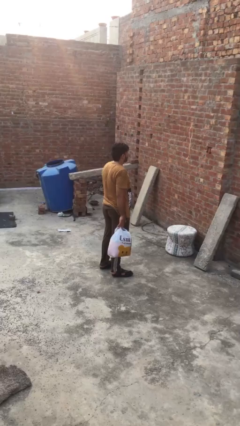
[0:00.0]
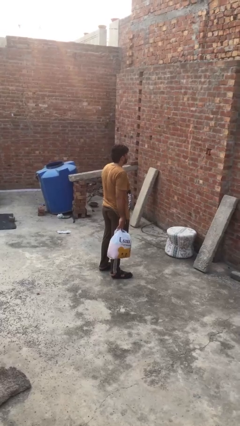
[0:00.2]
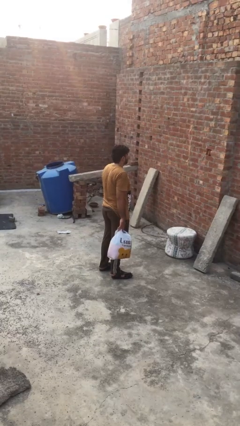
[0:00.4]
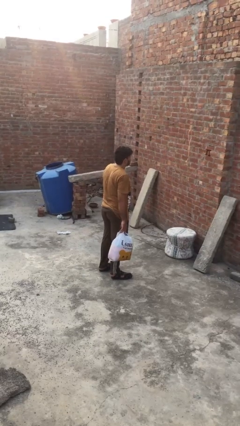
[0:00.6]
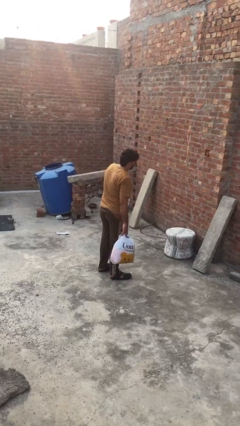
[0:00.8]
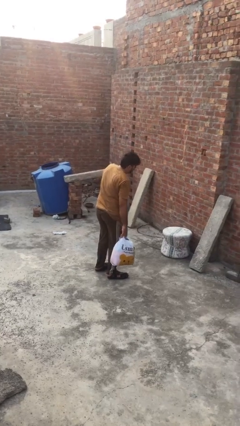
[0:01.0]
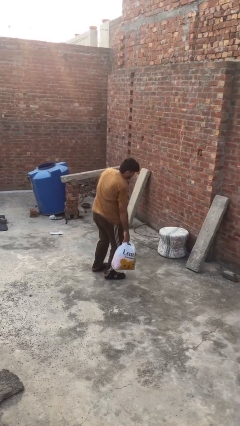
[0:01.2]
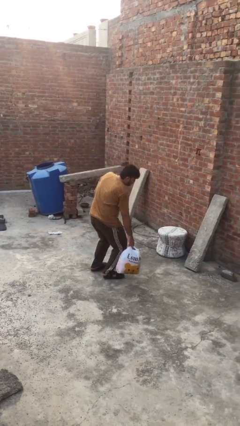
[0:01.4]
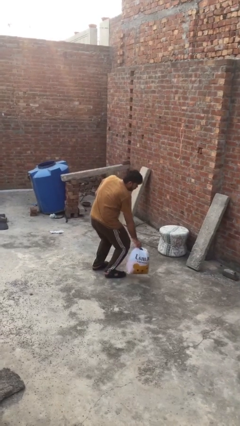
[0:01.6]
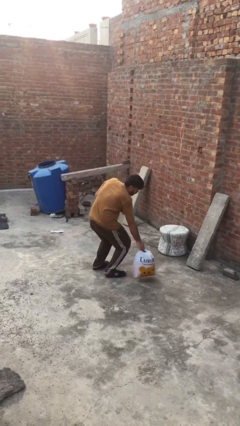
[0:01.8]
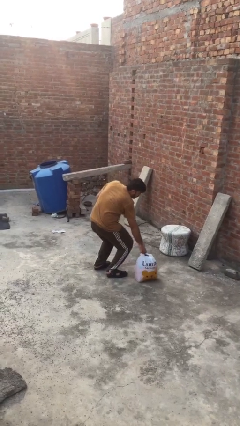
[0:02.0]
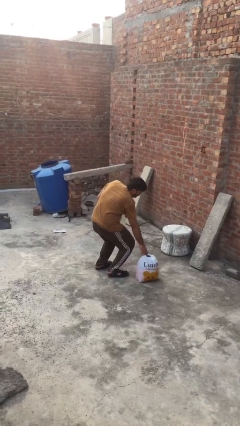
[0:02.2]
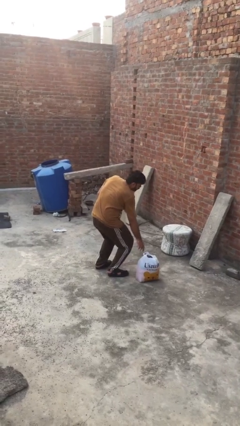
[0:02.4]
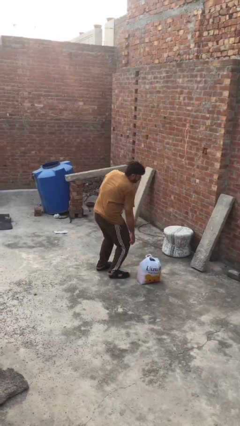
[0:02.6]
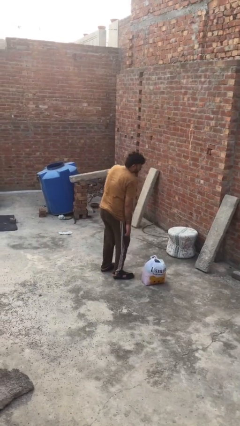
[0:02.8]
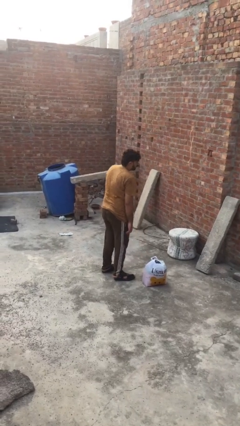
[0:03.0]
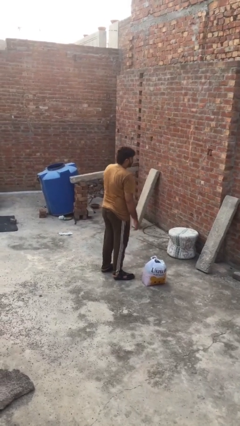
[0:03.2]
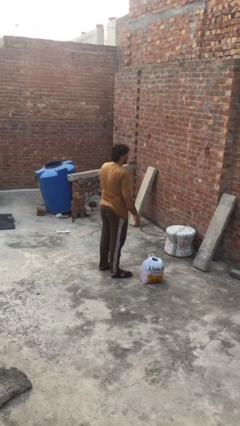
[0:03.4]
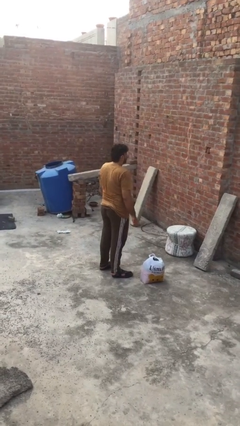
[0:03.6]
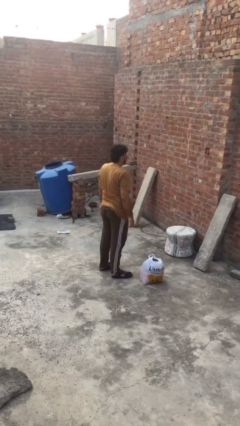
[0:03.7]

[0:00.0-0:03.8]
person puts down object on floor

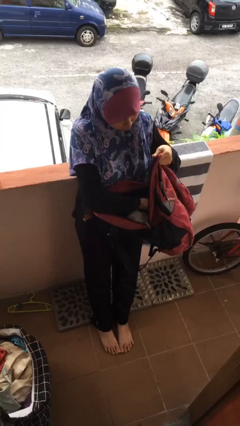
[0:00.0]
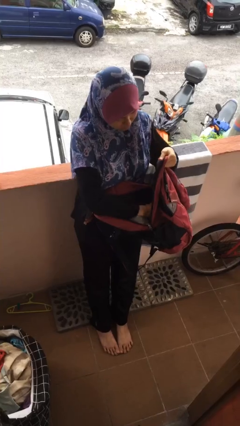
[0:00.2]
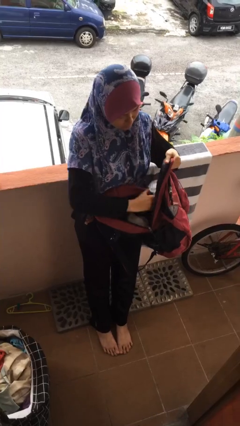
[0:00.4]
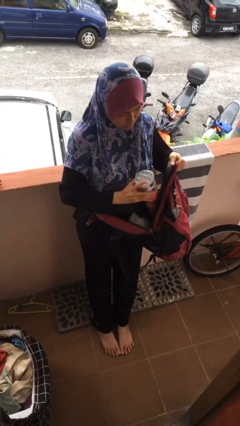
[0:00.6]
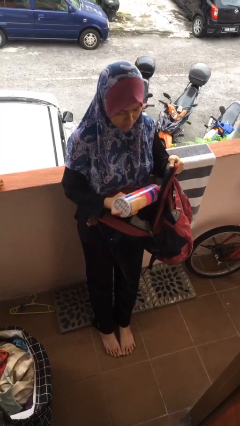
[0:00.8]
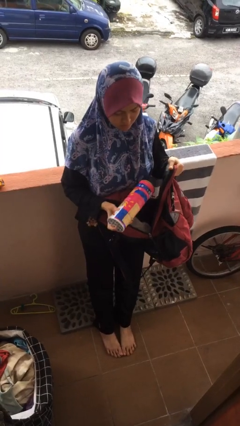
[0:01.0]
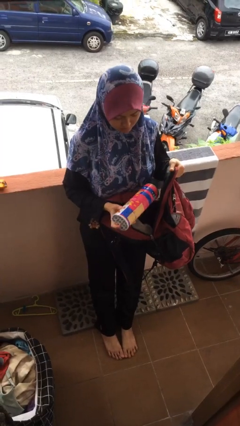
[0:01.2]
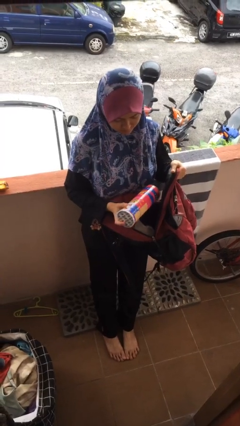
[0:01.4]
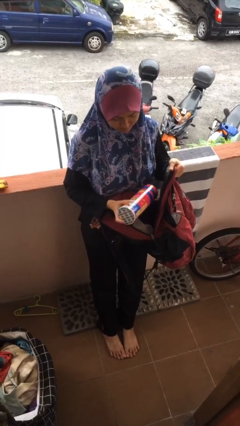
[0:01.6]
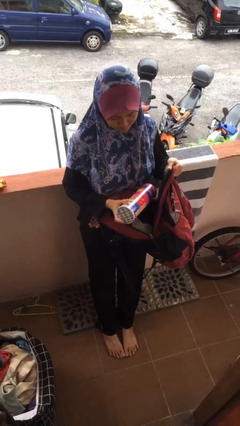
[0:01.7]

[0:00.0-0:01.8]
person takes object from backpack

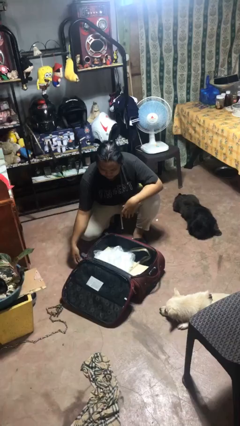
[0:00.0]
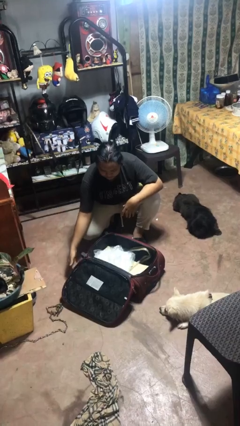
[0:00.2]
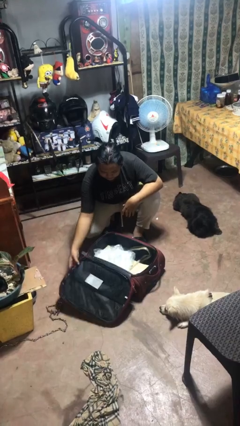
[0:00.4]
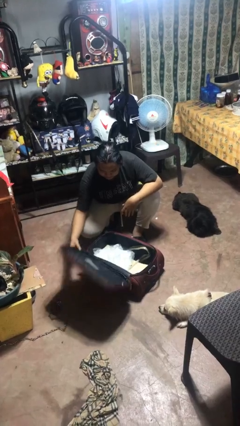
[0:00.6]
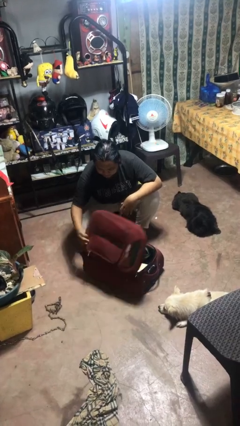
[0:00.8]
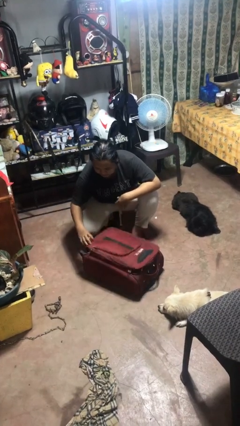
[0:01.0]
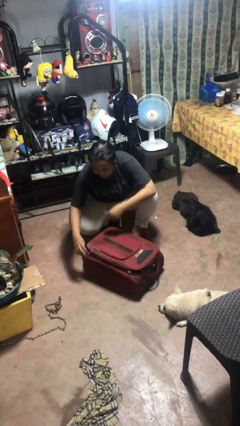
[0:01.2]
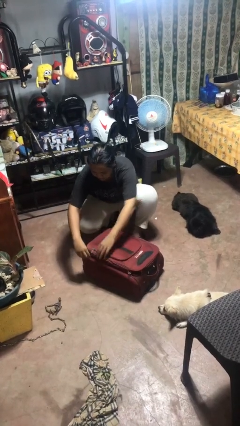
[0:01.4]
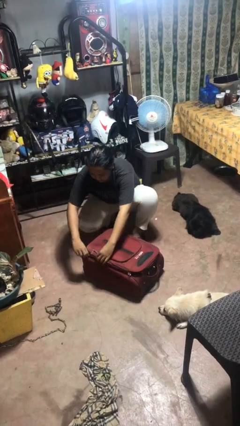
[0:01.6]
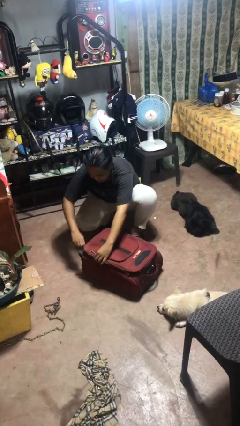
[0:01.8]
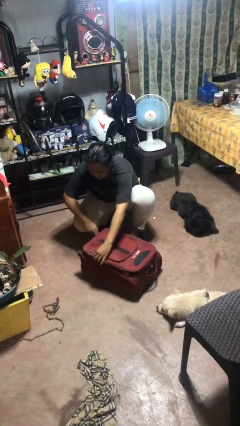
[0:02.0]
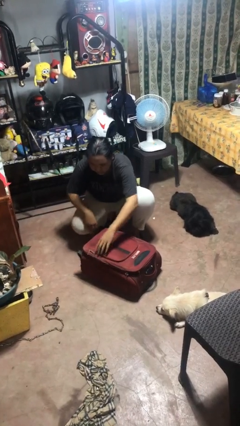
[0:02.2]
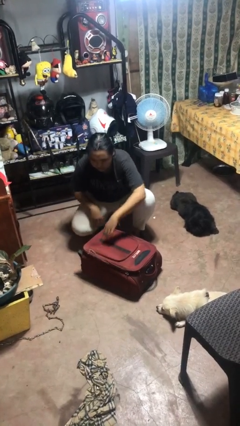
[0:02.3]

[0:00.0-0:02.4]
person closes suitcase

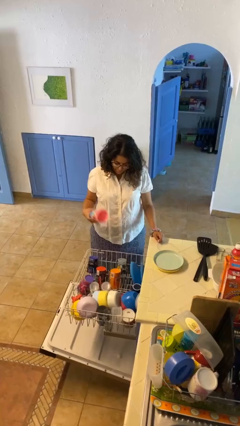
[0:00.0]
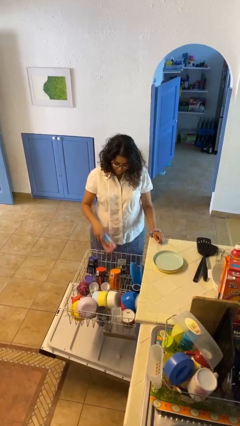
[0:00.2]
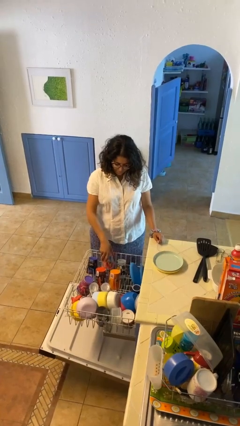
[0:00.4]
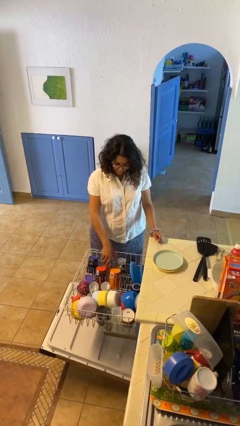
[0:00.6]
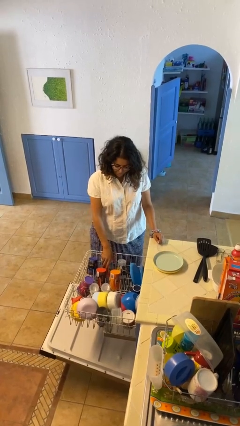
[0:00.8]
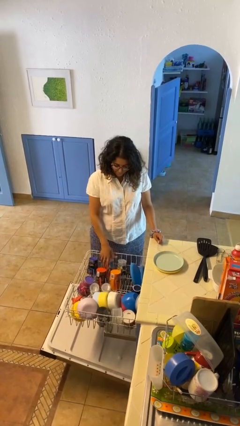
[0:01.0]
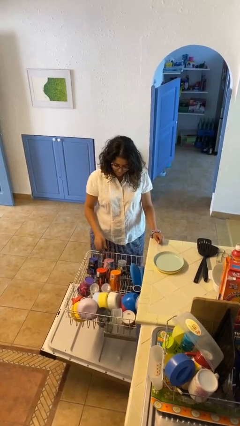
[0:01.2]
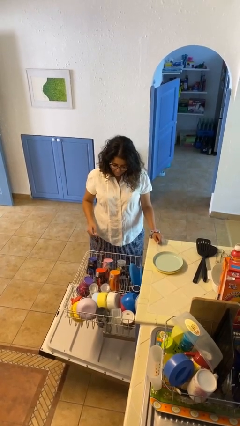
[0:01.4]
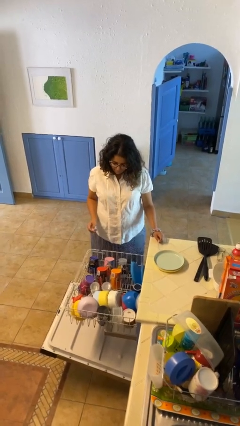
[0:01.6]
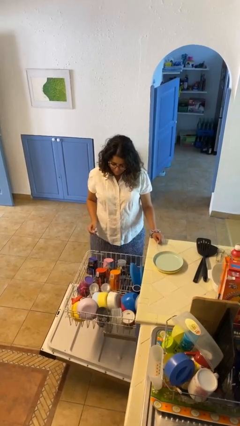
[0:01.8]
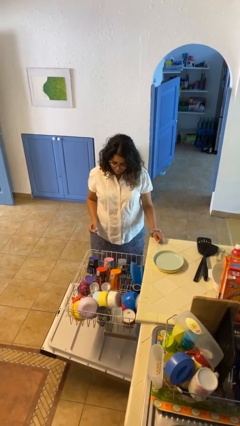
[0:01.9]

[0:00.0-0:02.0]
person loads dishwasher

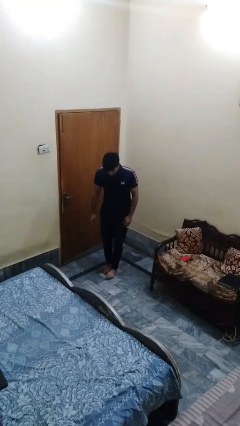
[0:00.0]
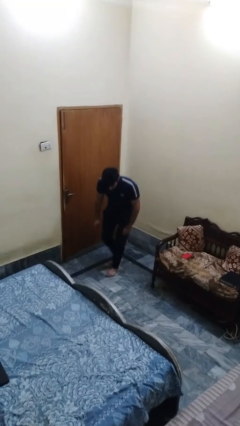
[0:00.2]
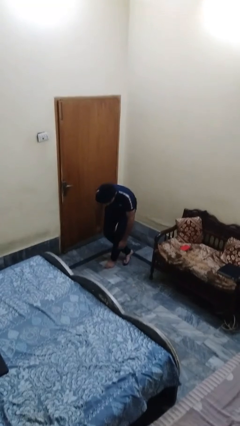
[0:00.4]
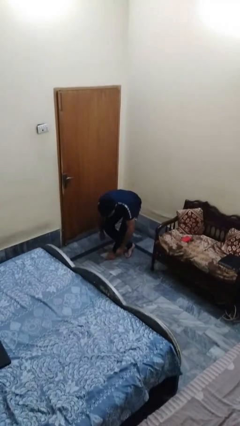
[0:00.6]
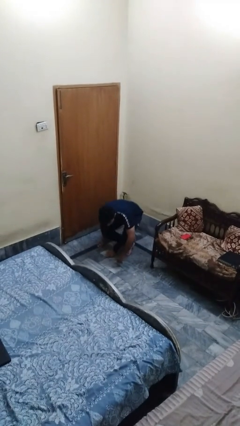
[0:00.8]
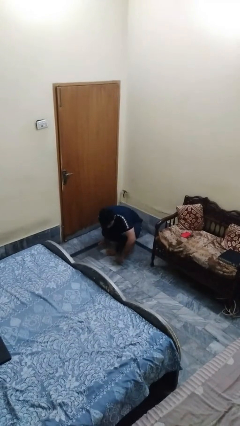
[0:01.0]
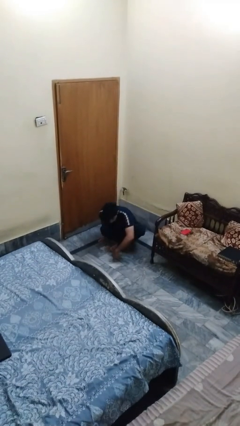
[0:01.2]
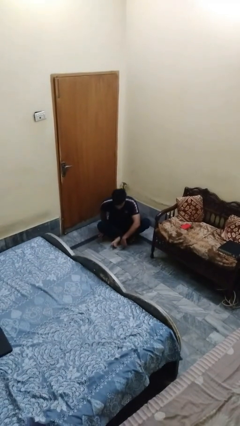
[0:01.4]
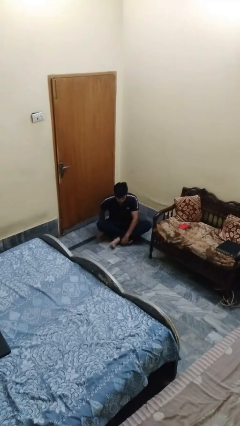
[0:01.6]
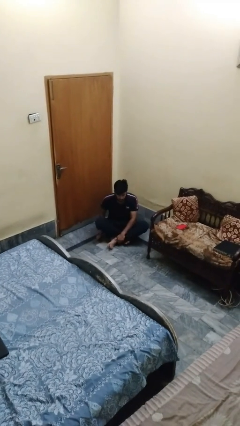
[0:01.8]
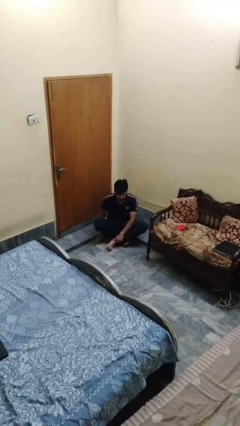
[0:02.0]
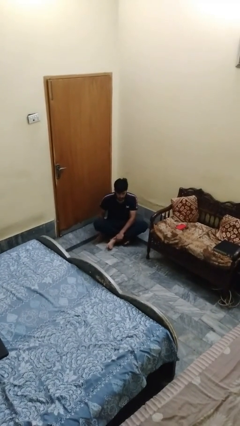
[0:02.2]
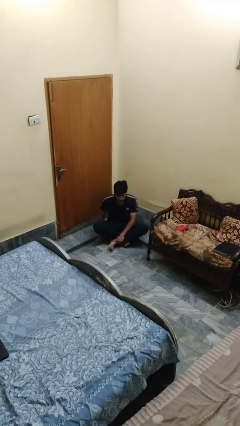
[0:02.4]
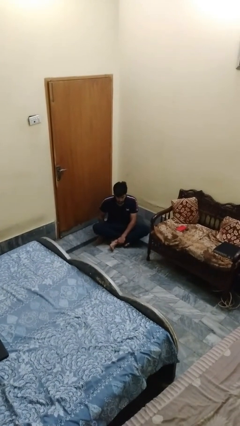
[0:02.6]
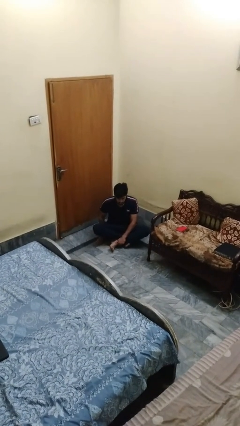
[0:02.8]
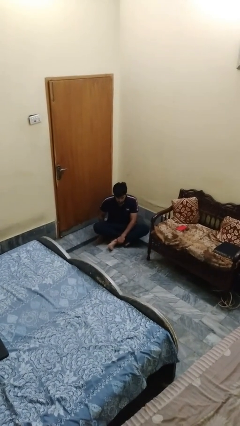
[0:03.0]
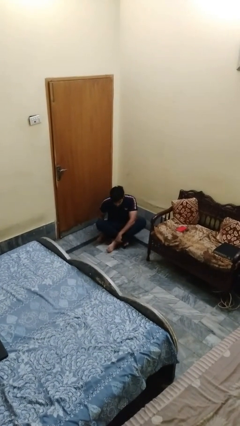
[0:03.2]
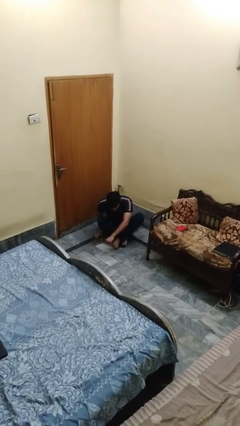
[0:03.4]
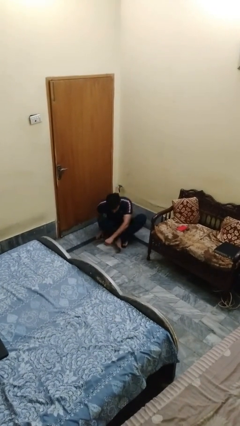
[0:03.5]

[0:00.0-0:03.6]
person sits crisscross

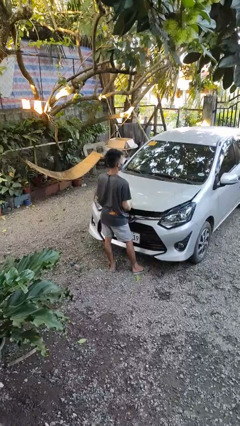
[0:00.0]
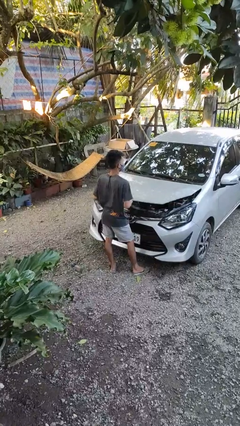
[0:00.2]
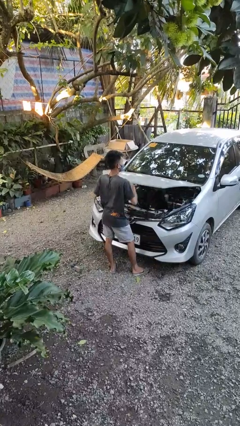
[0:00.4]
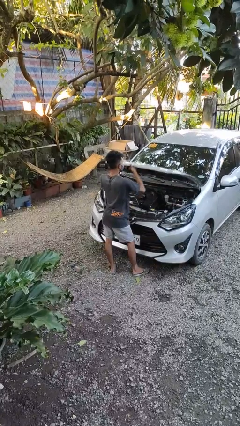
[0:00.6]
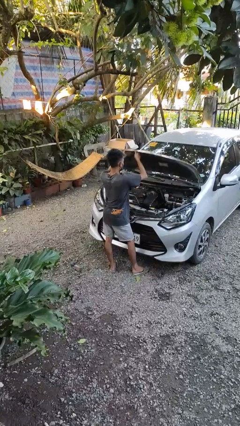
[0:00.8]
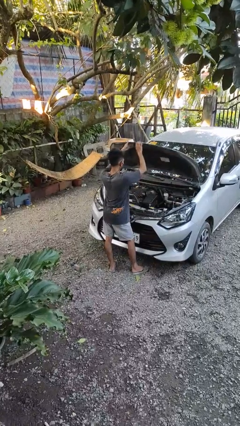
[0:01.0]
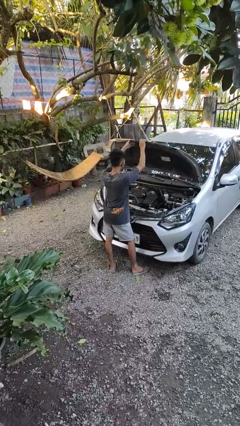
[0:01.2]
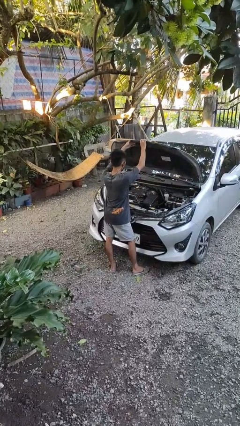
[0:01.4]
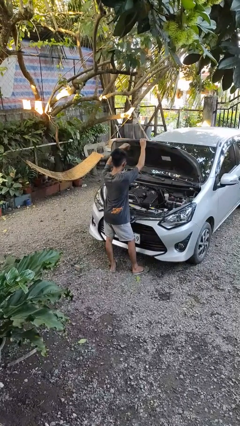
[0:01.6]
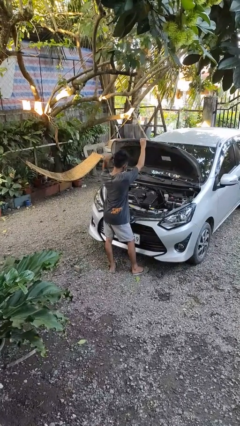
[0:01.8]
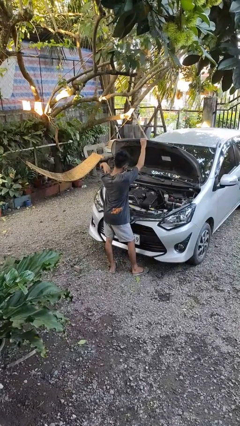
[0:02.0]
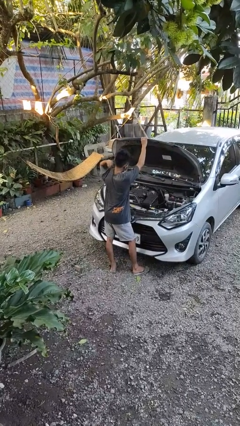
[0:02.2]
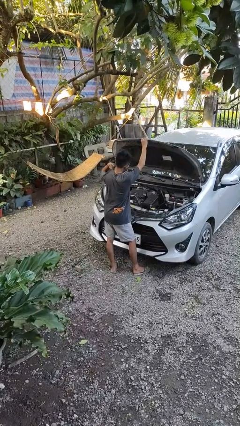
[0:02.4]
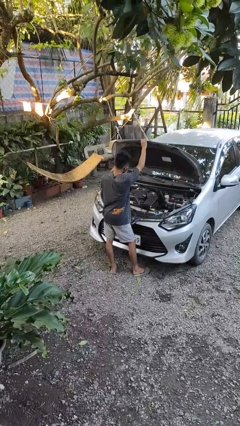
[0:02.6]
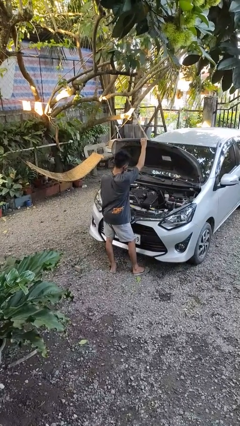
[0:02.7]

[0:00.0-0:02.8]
person opens car hood

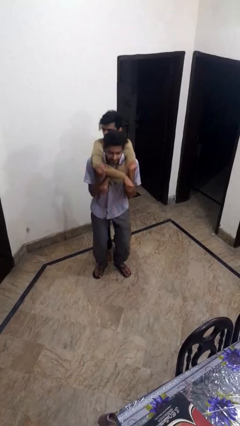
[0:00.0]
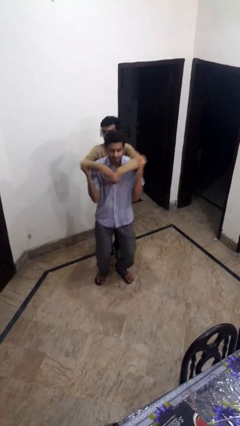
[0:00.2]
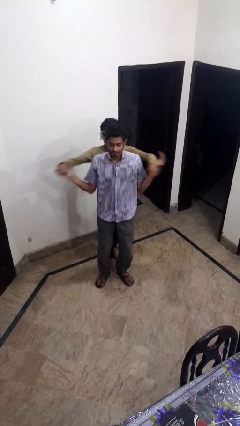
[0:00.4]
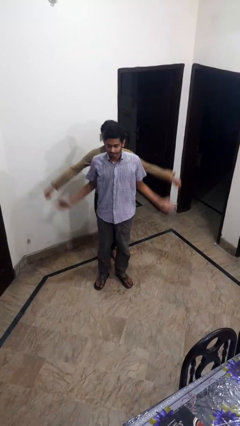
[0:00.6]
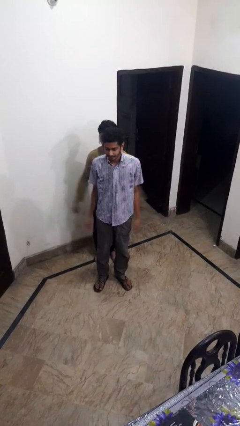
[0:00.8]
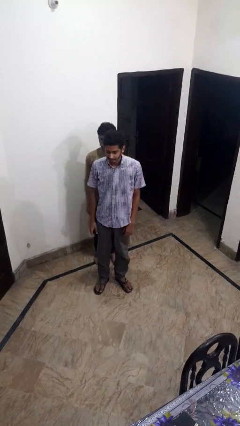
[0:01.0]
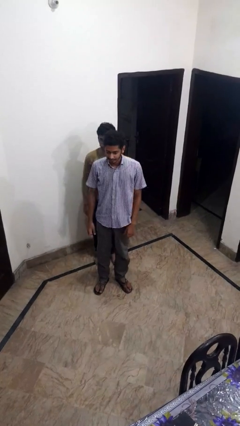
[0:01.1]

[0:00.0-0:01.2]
person puts down person
